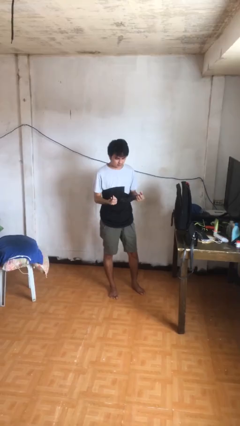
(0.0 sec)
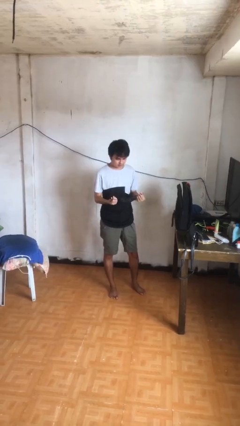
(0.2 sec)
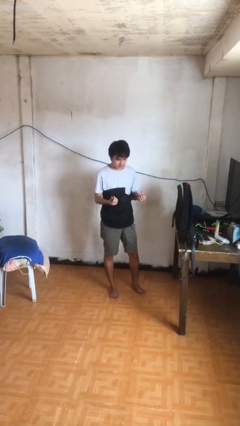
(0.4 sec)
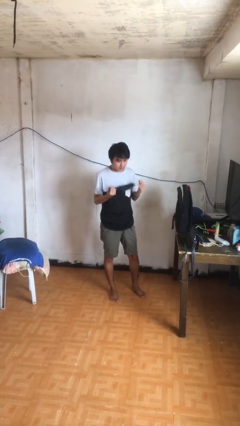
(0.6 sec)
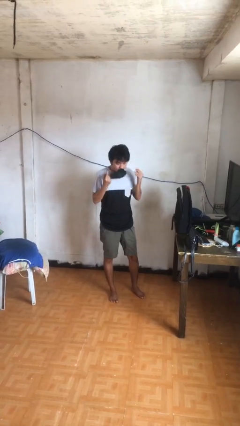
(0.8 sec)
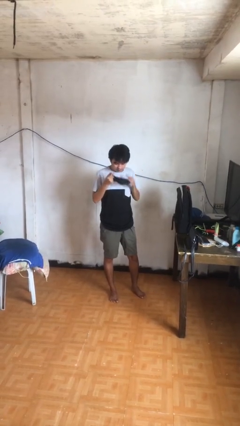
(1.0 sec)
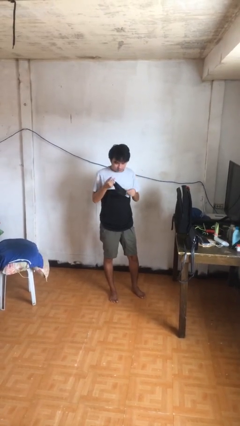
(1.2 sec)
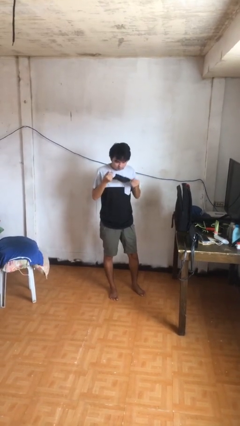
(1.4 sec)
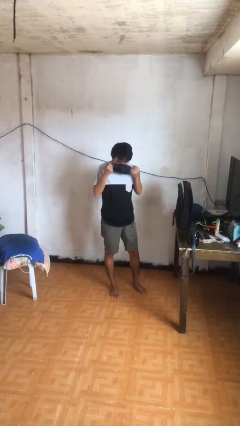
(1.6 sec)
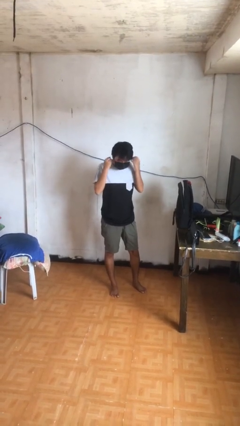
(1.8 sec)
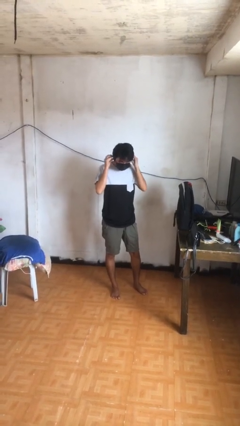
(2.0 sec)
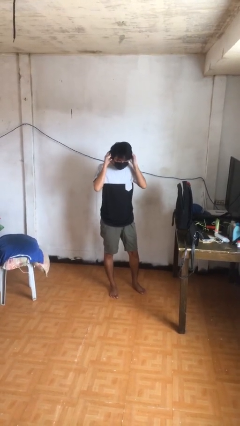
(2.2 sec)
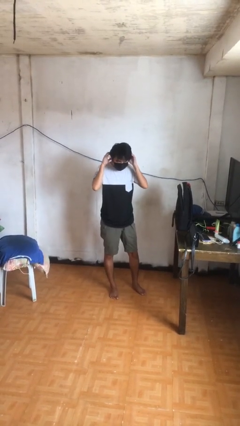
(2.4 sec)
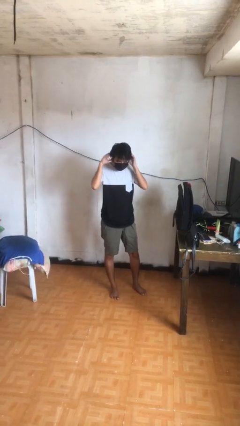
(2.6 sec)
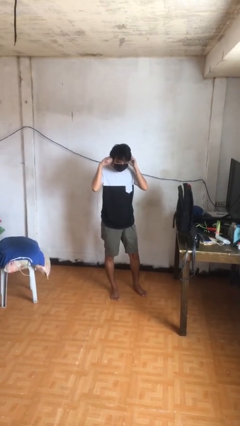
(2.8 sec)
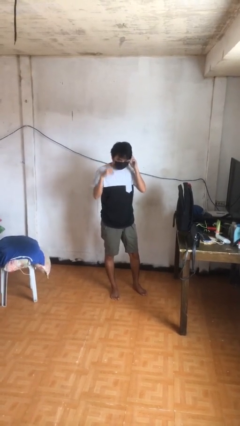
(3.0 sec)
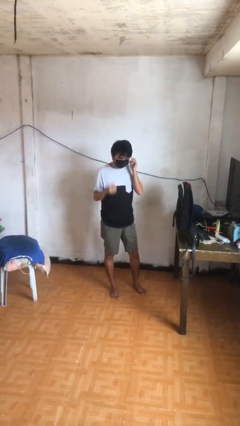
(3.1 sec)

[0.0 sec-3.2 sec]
person puts on facemask

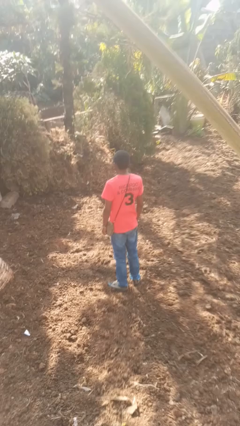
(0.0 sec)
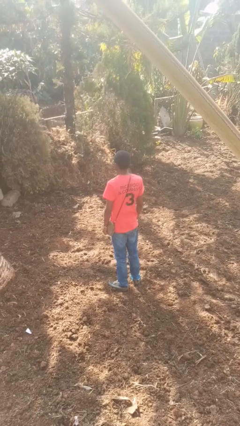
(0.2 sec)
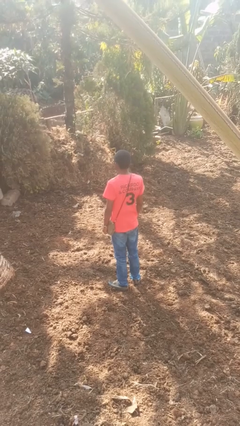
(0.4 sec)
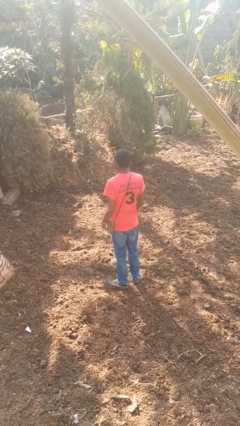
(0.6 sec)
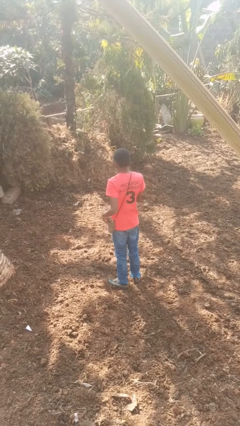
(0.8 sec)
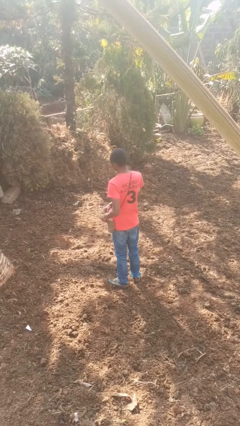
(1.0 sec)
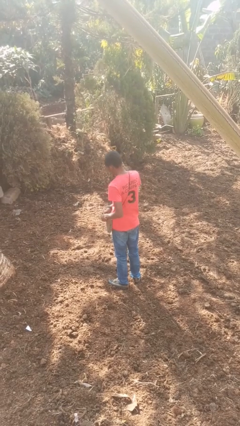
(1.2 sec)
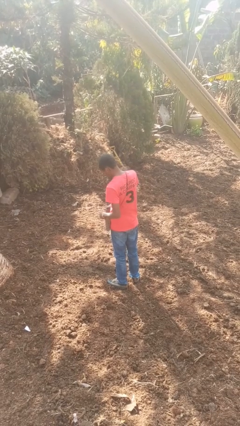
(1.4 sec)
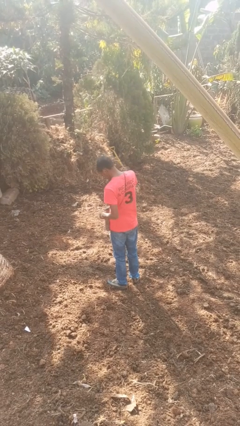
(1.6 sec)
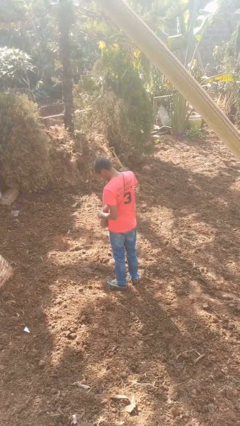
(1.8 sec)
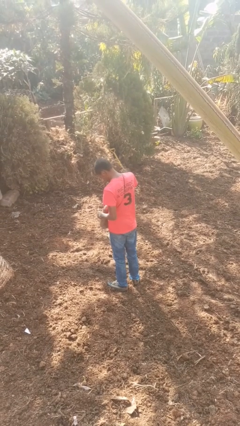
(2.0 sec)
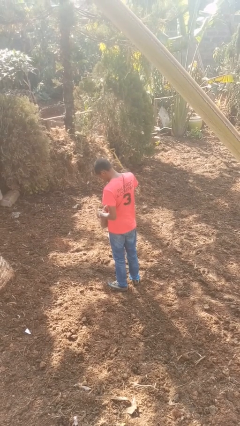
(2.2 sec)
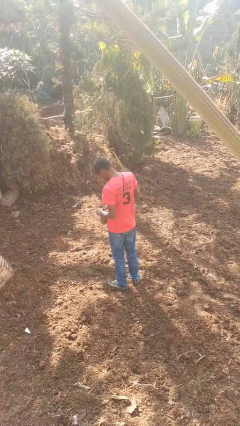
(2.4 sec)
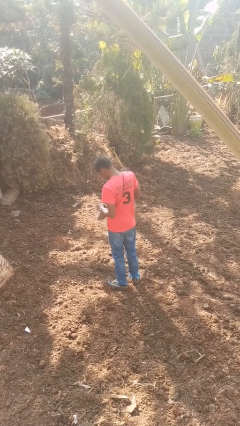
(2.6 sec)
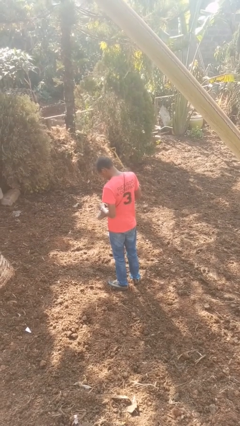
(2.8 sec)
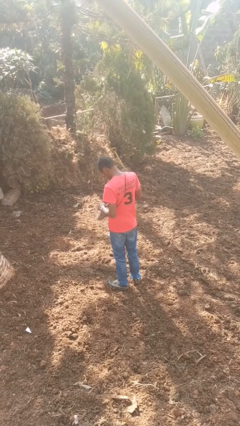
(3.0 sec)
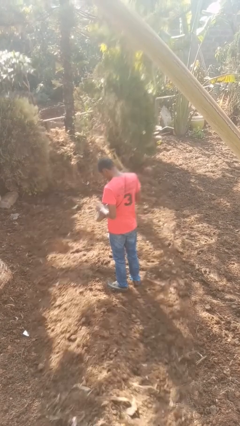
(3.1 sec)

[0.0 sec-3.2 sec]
person searches in purse

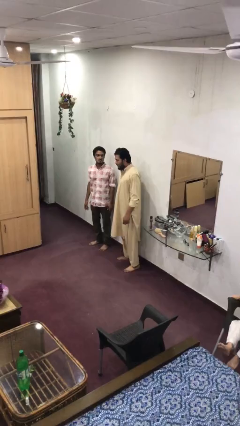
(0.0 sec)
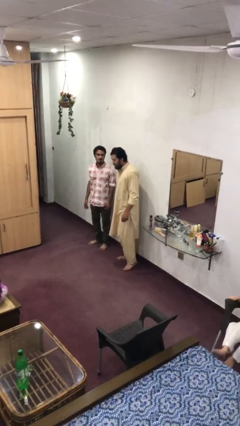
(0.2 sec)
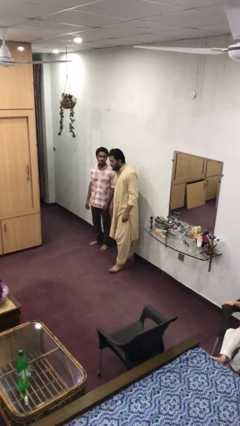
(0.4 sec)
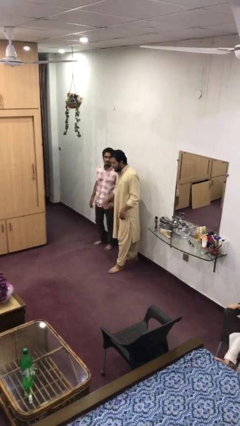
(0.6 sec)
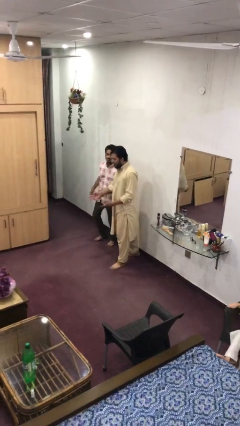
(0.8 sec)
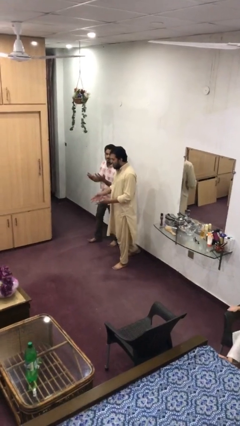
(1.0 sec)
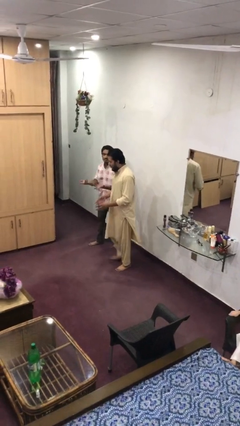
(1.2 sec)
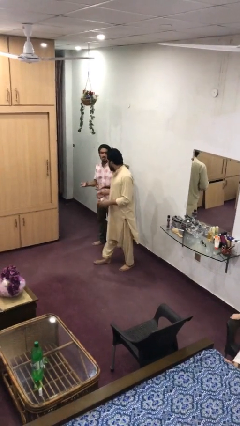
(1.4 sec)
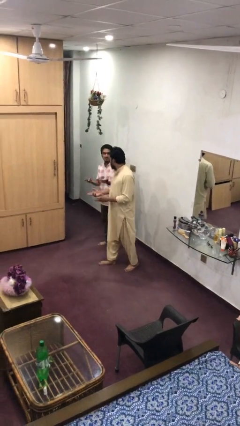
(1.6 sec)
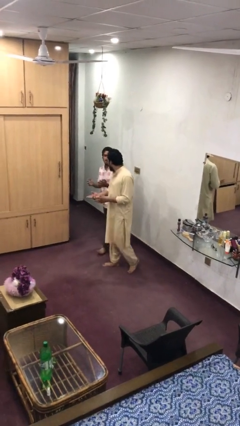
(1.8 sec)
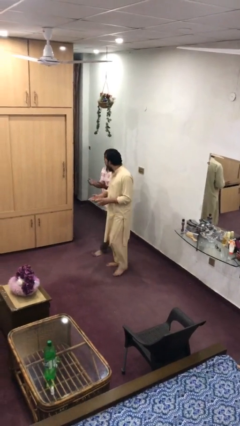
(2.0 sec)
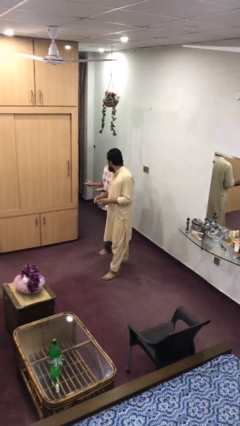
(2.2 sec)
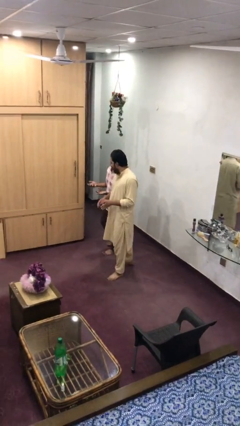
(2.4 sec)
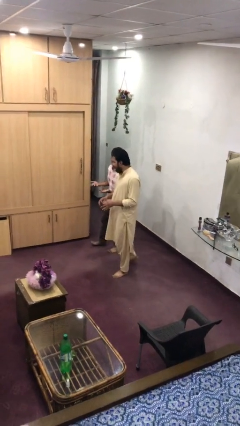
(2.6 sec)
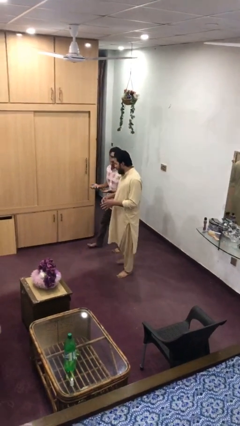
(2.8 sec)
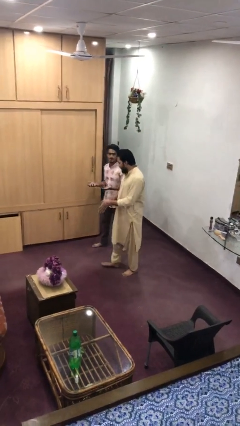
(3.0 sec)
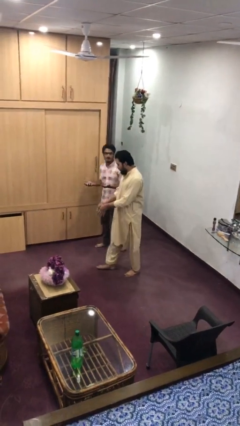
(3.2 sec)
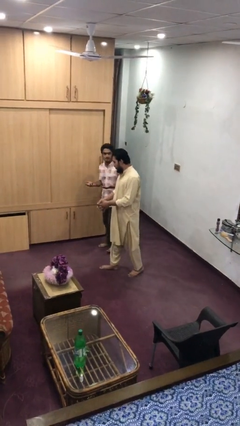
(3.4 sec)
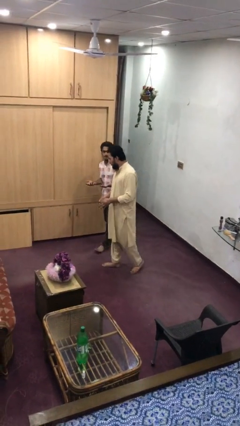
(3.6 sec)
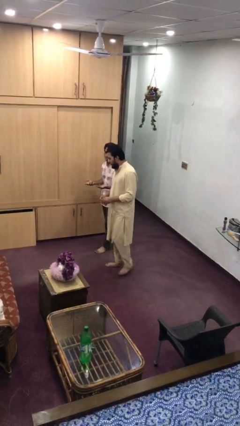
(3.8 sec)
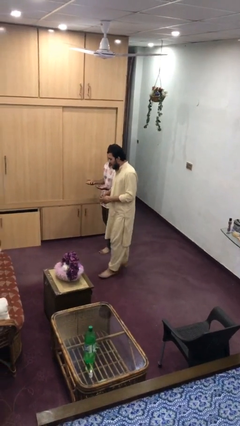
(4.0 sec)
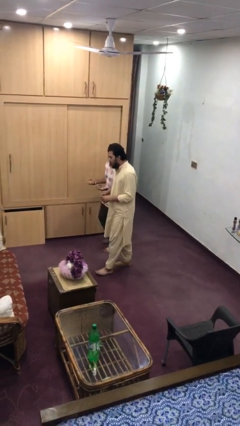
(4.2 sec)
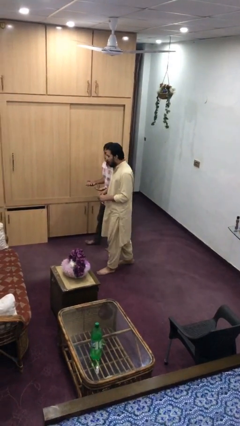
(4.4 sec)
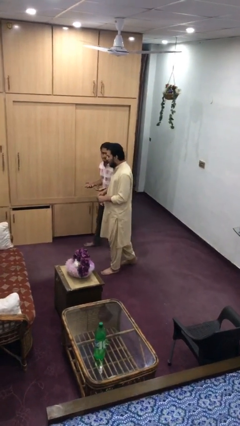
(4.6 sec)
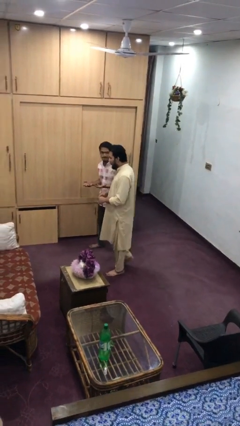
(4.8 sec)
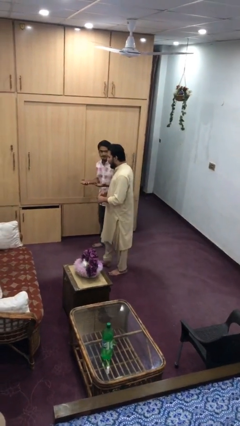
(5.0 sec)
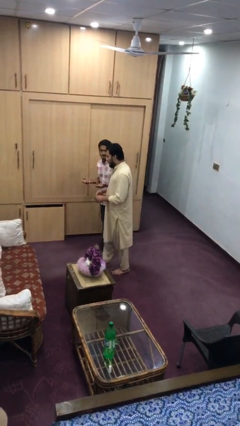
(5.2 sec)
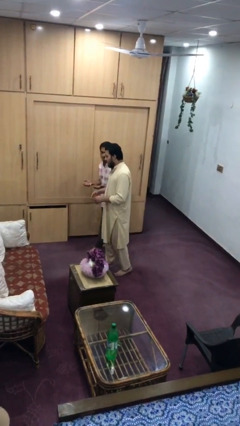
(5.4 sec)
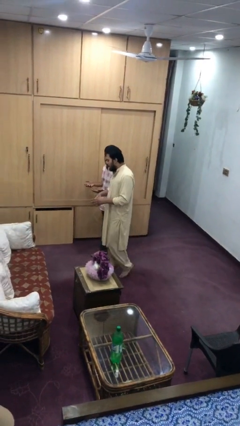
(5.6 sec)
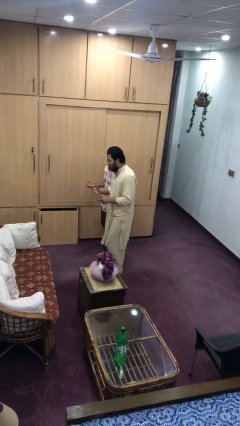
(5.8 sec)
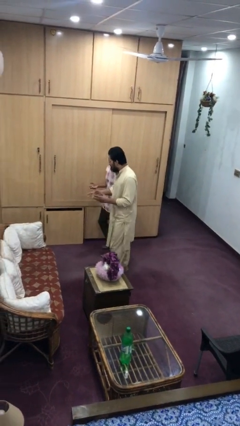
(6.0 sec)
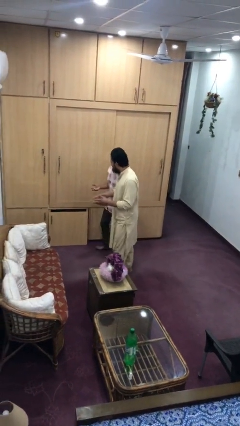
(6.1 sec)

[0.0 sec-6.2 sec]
person talks to person

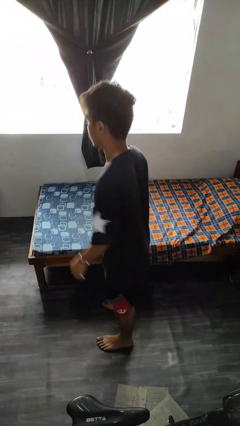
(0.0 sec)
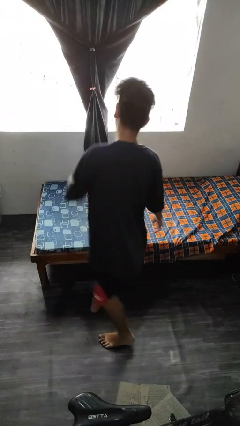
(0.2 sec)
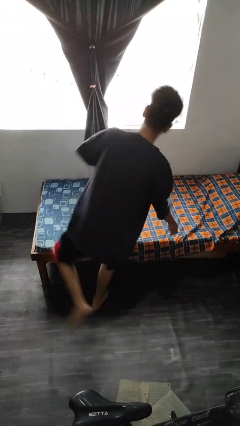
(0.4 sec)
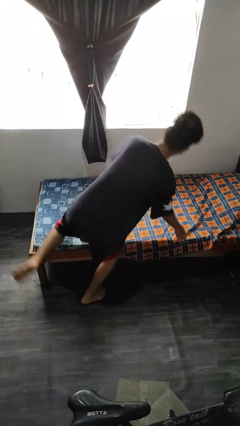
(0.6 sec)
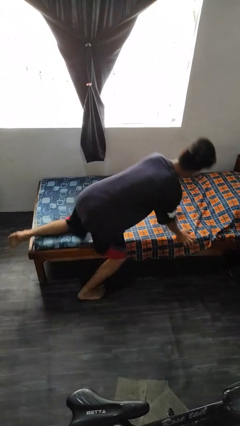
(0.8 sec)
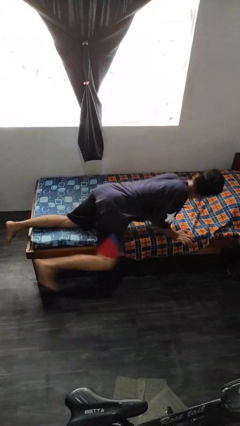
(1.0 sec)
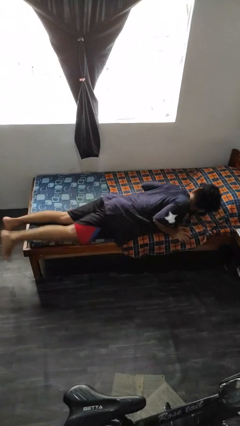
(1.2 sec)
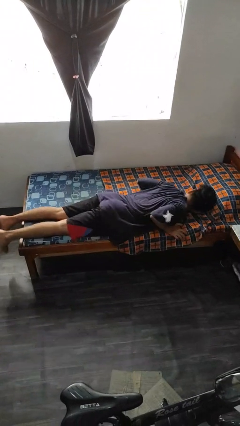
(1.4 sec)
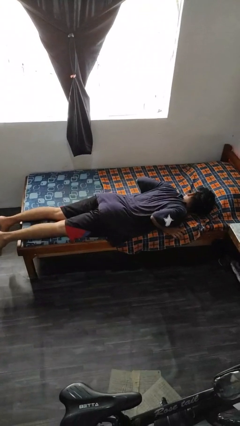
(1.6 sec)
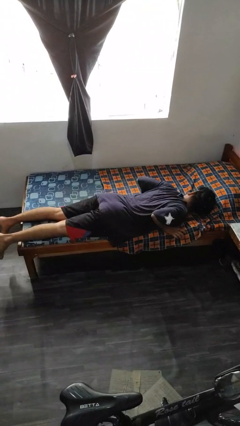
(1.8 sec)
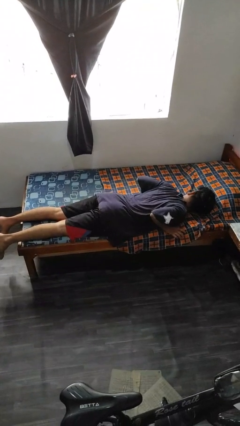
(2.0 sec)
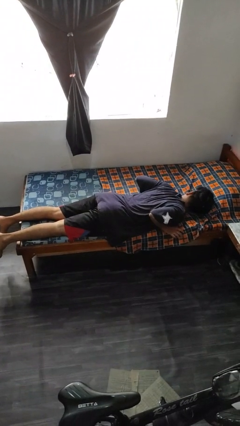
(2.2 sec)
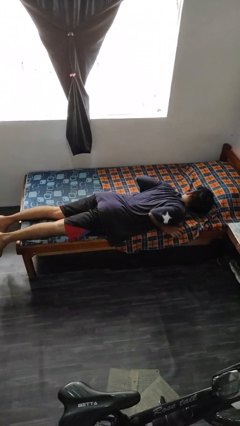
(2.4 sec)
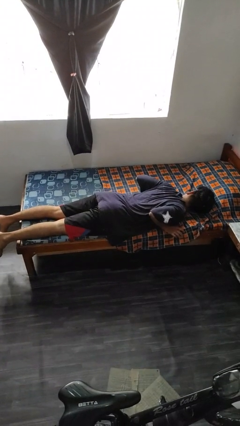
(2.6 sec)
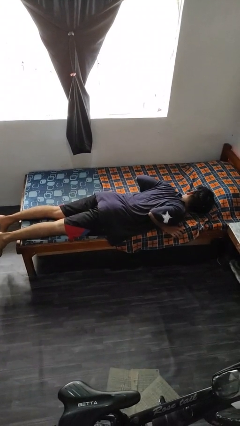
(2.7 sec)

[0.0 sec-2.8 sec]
person lies down on bed

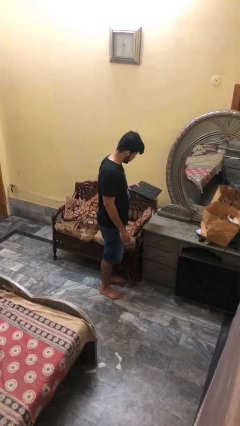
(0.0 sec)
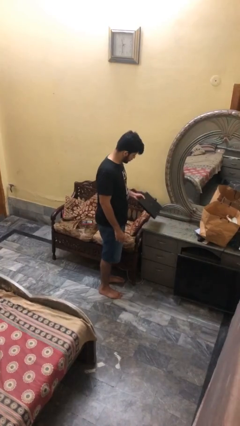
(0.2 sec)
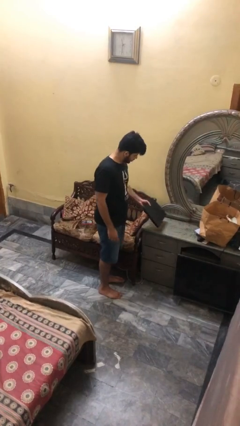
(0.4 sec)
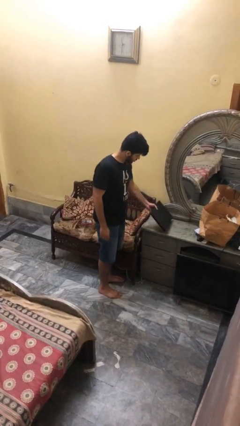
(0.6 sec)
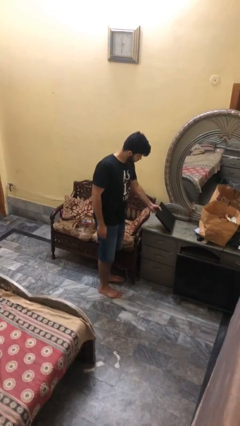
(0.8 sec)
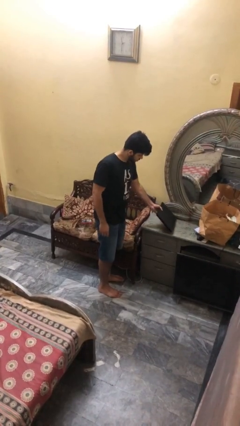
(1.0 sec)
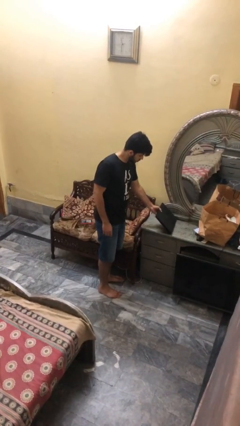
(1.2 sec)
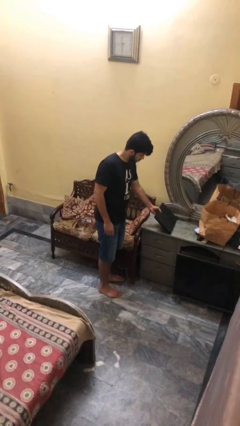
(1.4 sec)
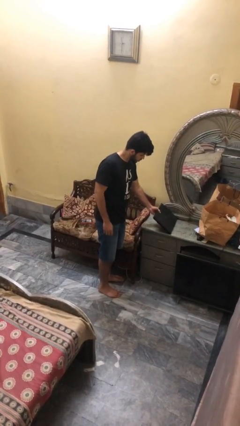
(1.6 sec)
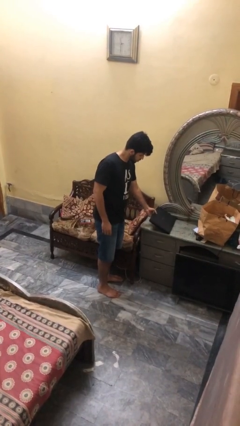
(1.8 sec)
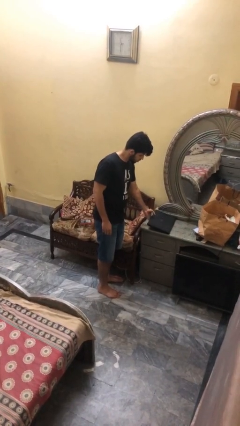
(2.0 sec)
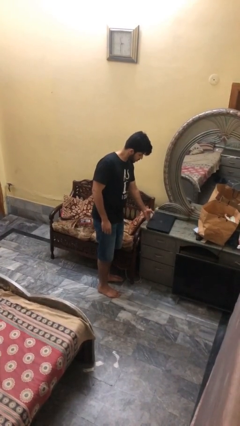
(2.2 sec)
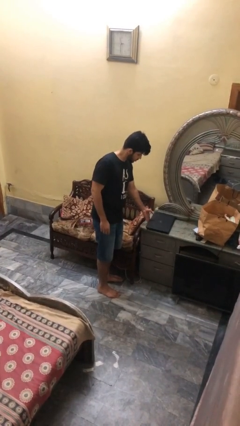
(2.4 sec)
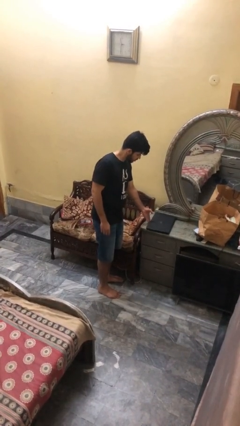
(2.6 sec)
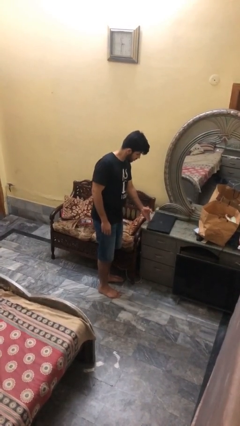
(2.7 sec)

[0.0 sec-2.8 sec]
person puts down object on countertop
